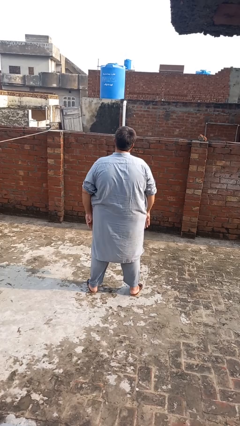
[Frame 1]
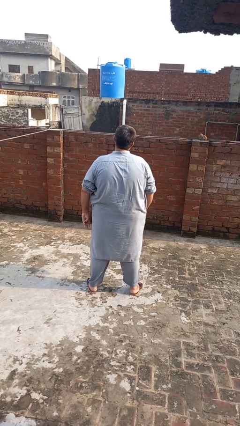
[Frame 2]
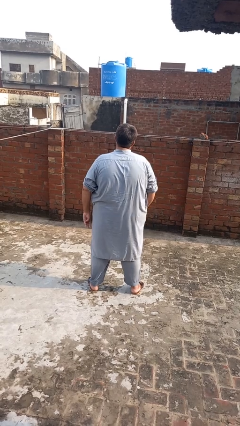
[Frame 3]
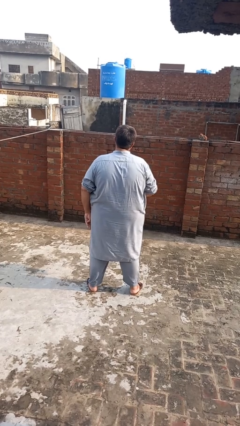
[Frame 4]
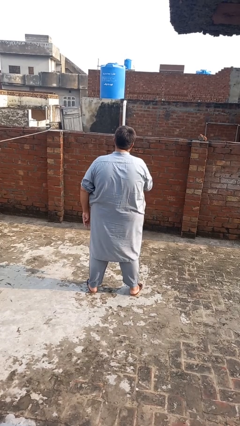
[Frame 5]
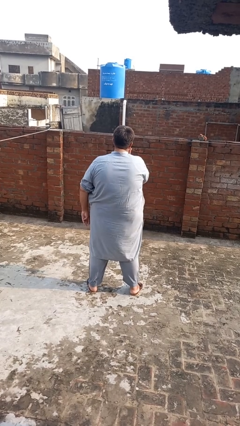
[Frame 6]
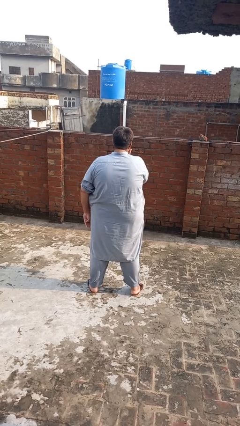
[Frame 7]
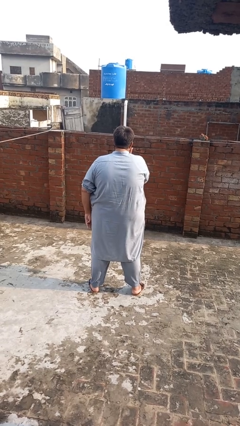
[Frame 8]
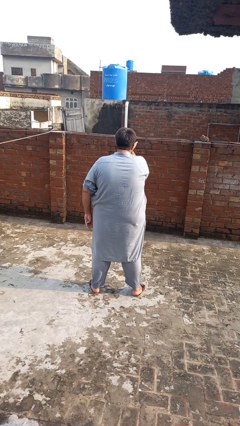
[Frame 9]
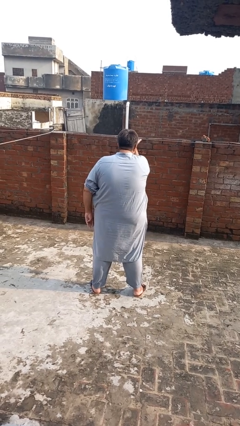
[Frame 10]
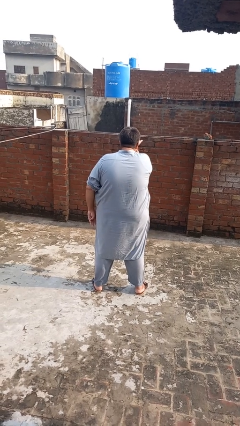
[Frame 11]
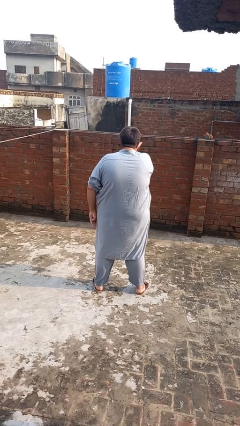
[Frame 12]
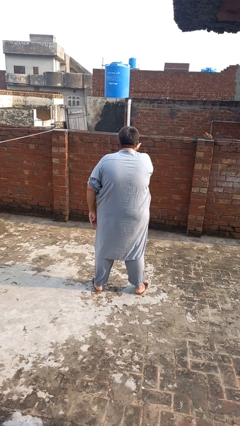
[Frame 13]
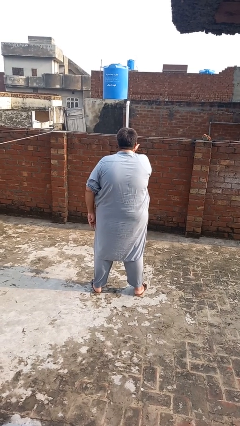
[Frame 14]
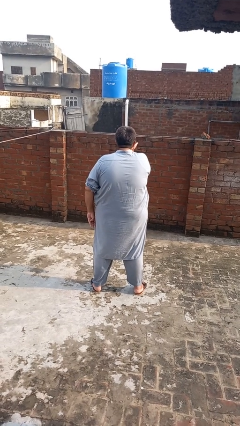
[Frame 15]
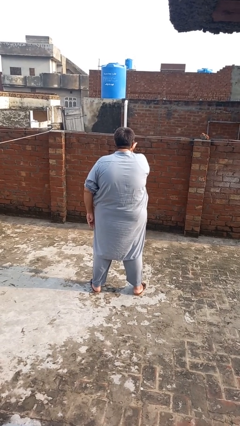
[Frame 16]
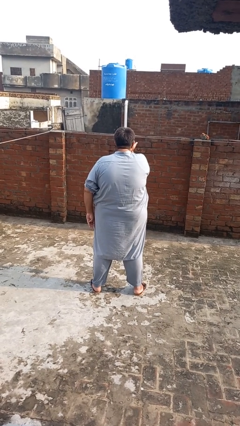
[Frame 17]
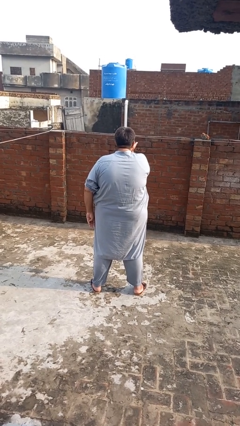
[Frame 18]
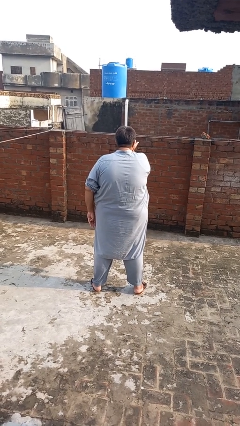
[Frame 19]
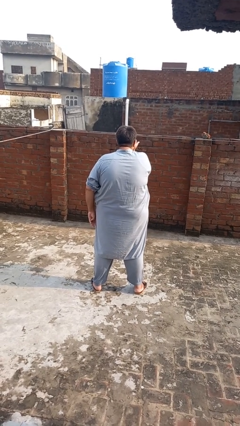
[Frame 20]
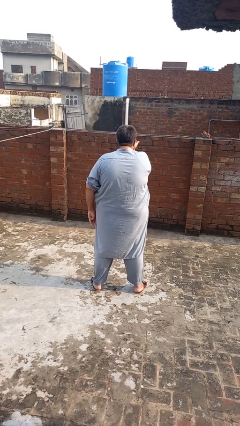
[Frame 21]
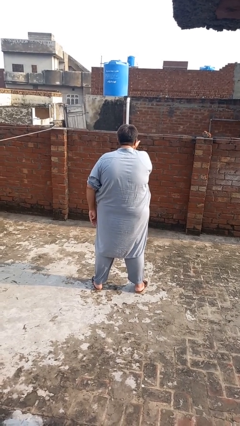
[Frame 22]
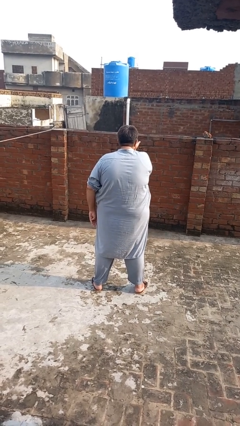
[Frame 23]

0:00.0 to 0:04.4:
person gestures blow kiss

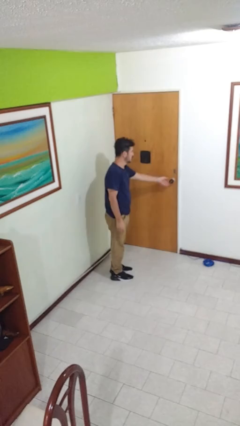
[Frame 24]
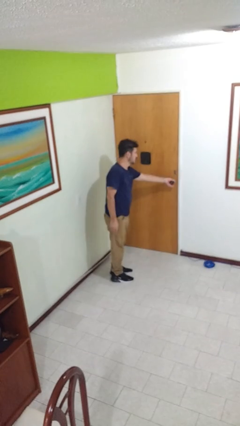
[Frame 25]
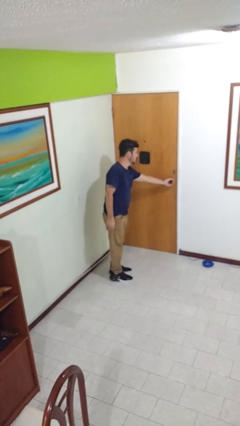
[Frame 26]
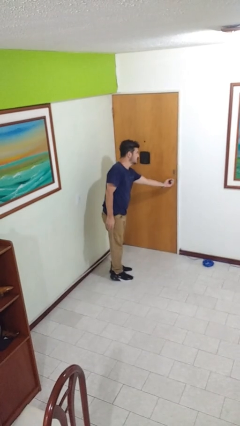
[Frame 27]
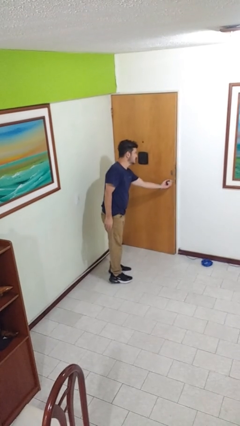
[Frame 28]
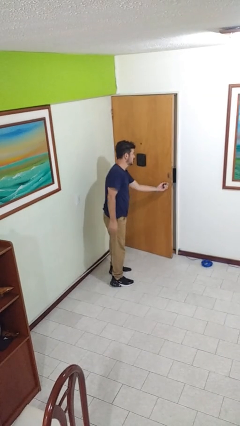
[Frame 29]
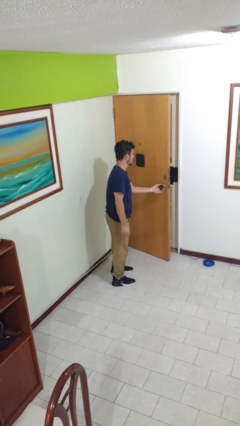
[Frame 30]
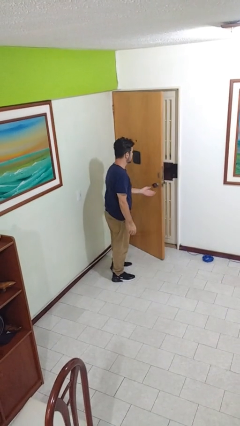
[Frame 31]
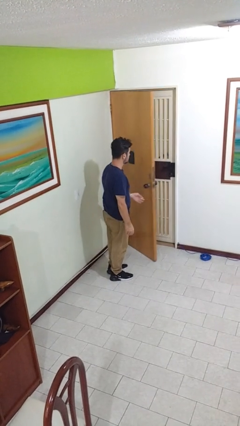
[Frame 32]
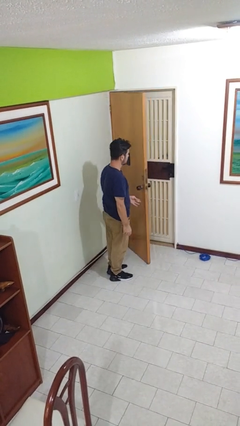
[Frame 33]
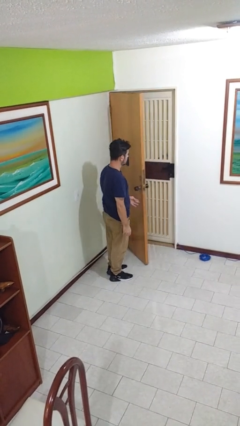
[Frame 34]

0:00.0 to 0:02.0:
person opens facility door

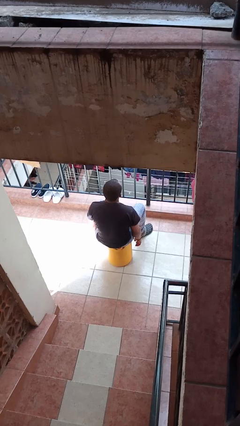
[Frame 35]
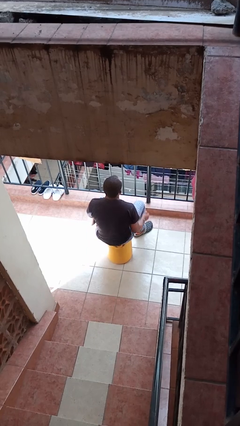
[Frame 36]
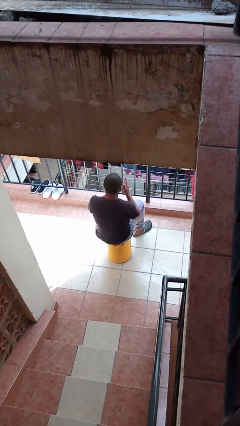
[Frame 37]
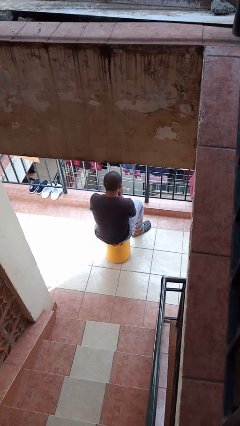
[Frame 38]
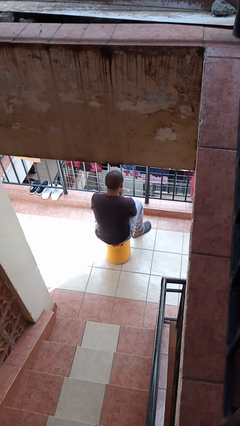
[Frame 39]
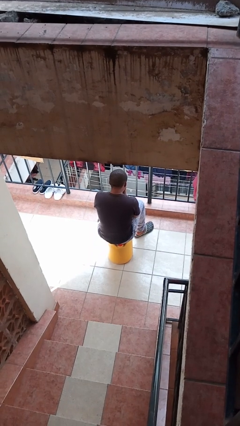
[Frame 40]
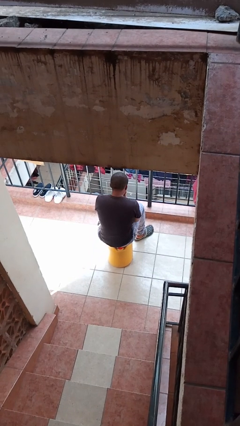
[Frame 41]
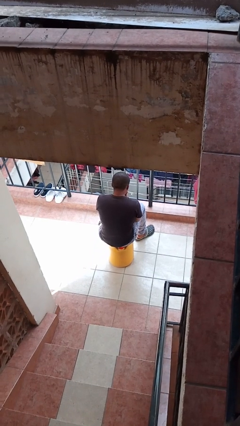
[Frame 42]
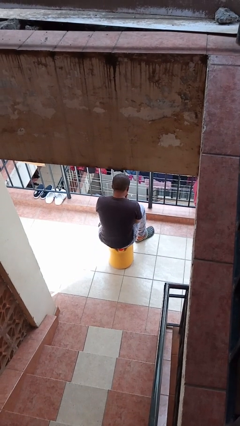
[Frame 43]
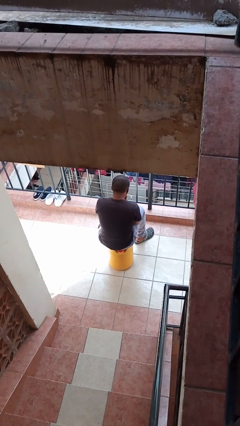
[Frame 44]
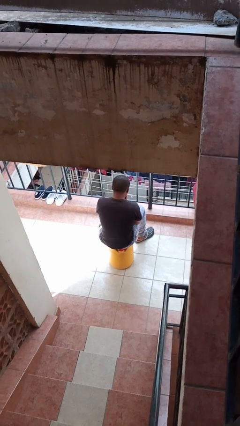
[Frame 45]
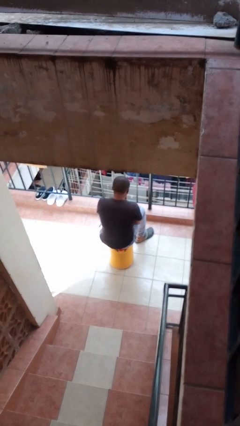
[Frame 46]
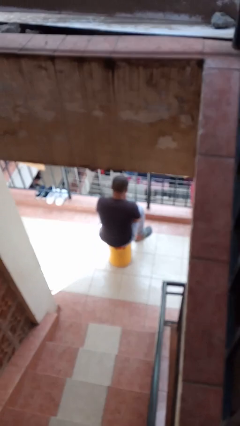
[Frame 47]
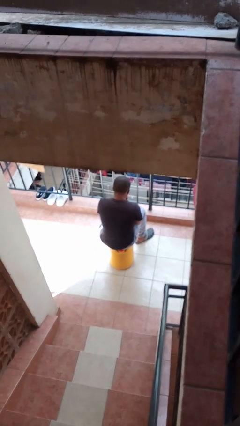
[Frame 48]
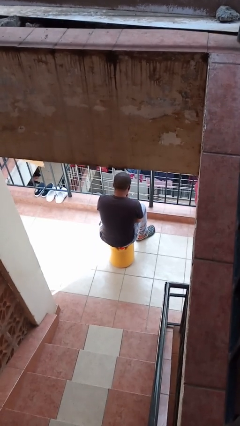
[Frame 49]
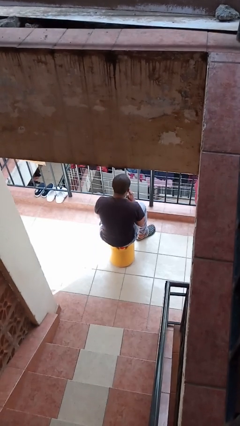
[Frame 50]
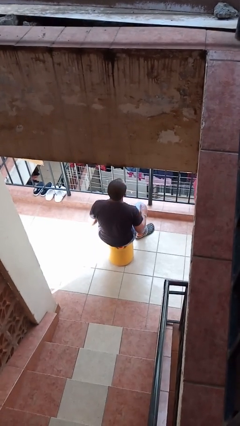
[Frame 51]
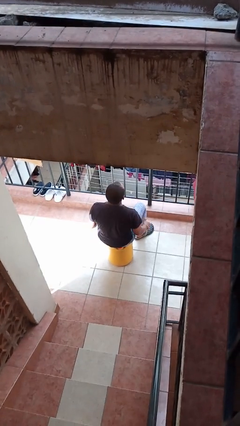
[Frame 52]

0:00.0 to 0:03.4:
person blows into hands

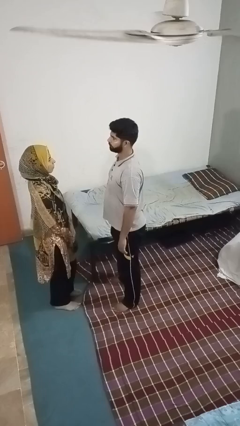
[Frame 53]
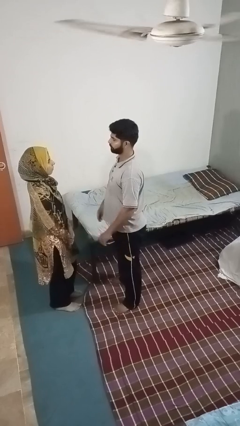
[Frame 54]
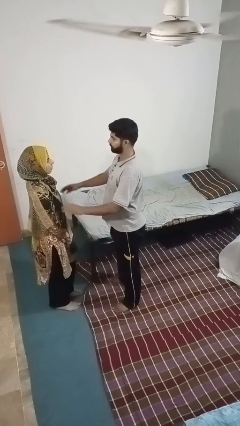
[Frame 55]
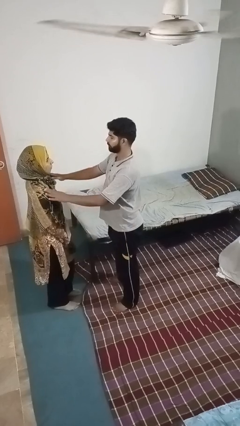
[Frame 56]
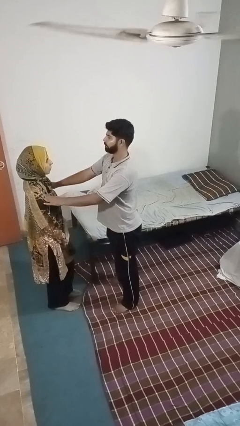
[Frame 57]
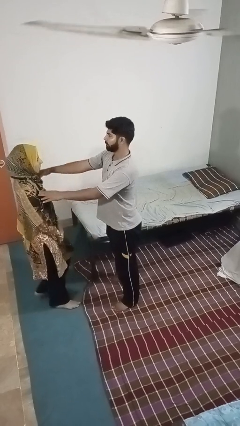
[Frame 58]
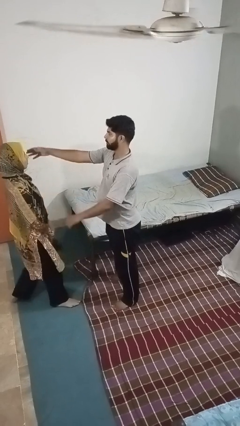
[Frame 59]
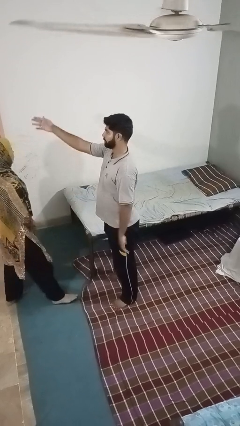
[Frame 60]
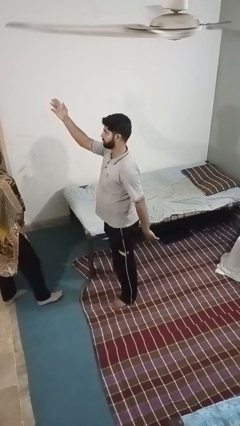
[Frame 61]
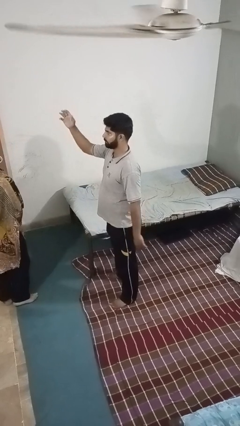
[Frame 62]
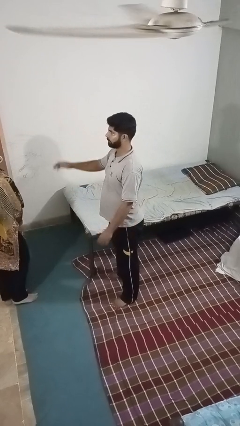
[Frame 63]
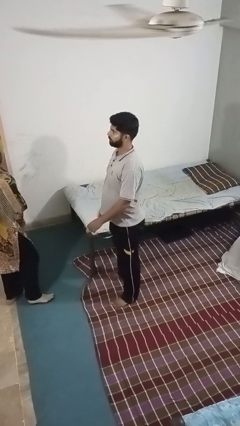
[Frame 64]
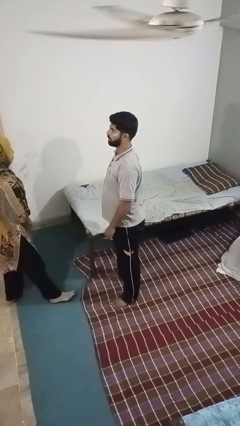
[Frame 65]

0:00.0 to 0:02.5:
person shoves person

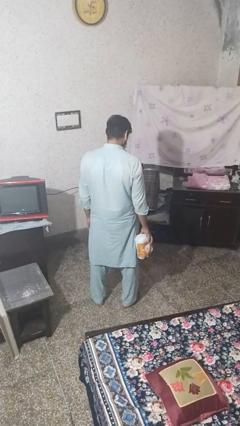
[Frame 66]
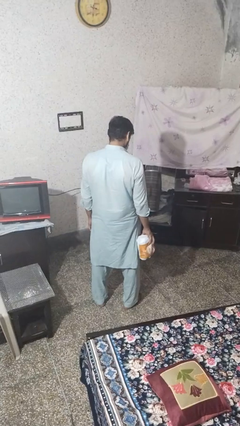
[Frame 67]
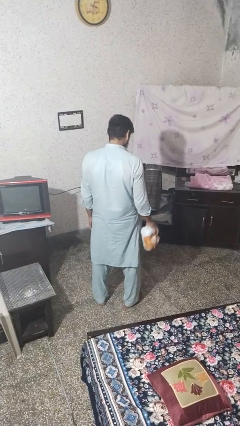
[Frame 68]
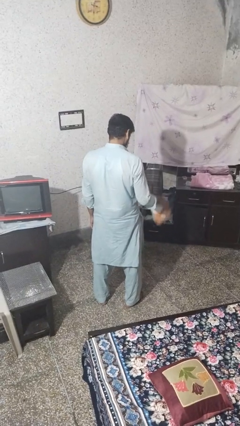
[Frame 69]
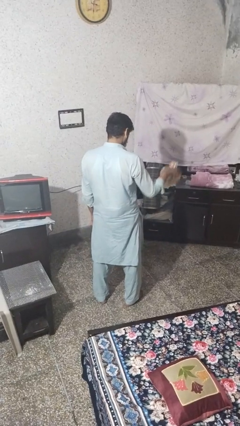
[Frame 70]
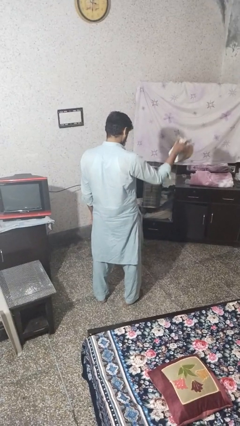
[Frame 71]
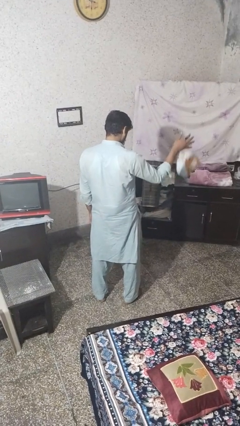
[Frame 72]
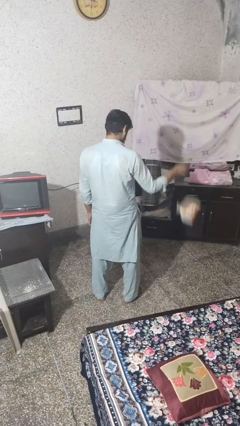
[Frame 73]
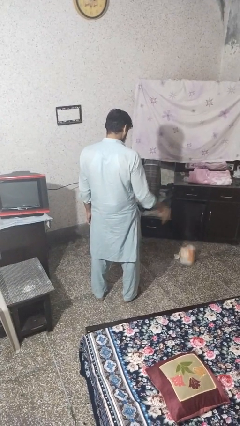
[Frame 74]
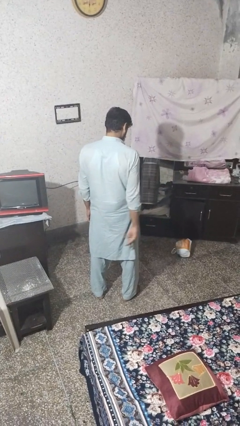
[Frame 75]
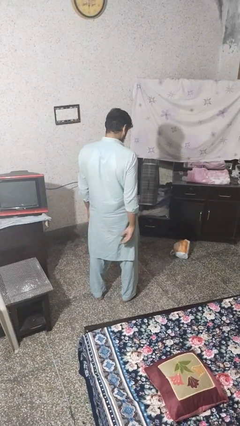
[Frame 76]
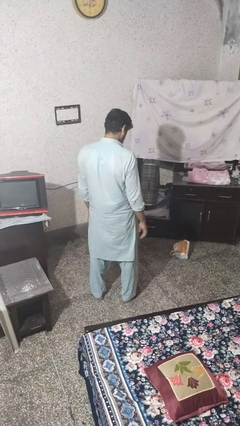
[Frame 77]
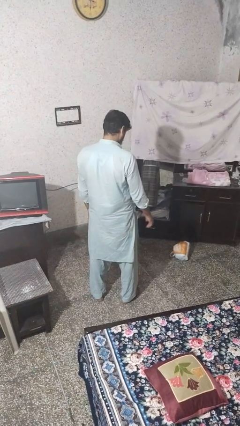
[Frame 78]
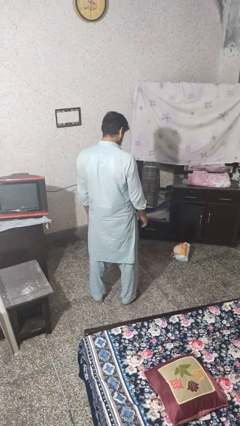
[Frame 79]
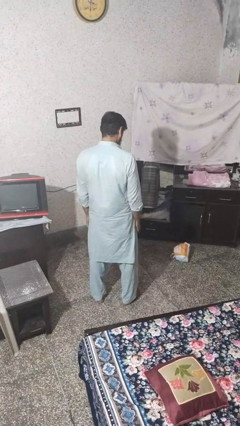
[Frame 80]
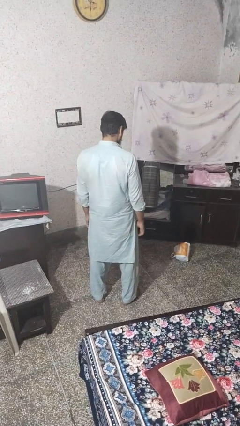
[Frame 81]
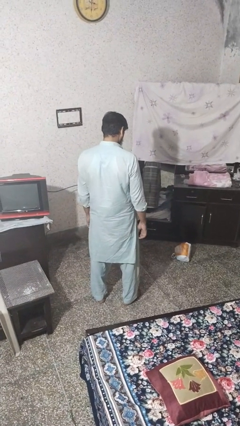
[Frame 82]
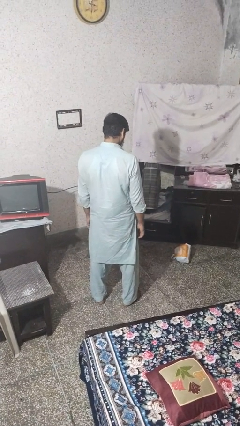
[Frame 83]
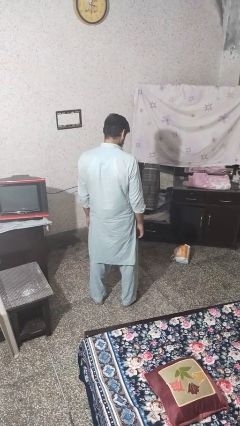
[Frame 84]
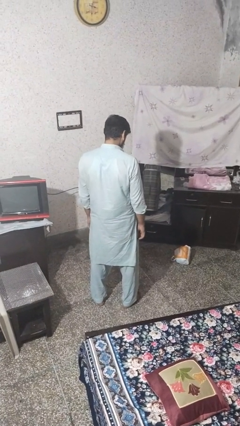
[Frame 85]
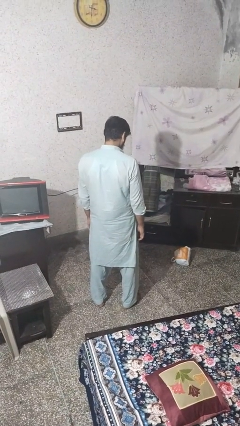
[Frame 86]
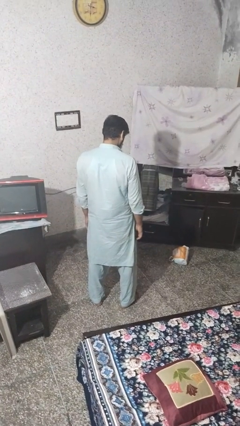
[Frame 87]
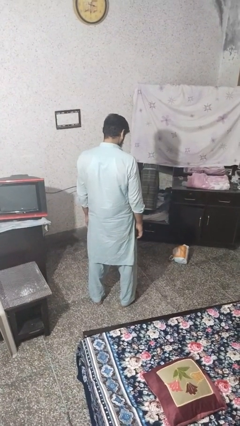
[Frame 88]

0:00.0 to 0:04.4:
person throws object to ground

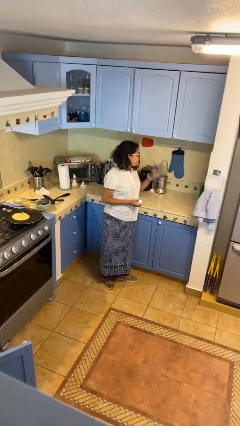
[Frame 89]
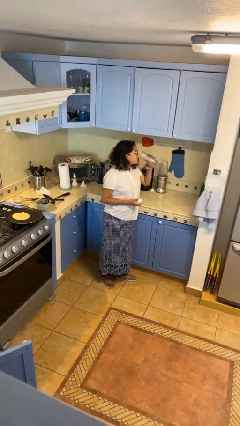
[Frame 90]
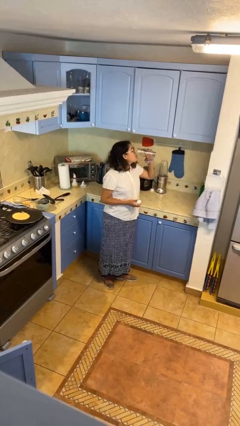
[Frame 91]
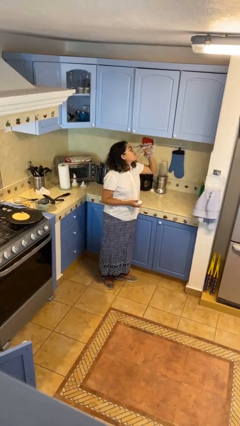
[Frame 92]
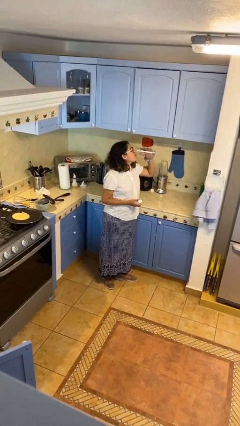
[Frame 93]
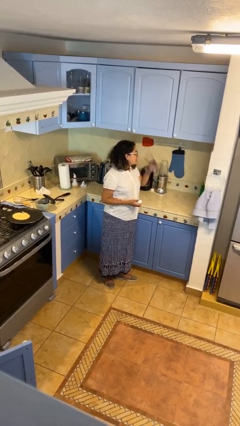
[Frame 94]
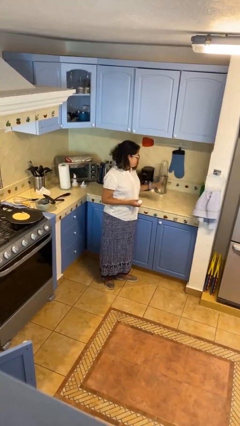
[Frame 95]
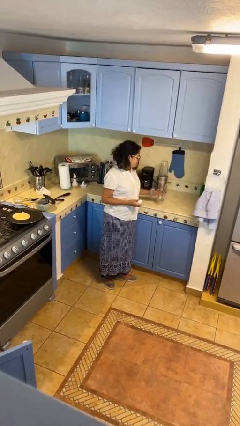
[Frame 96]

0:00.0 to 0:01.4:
person drinks from cup
